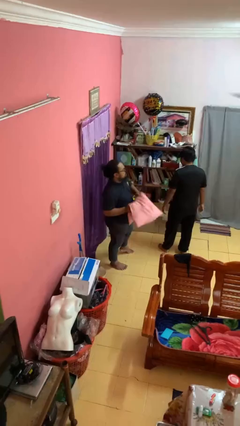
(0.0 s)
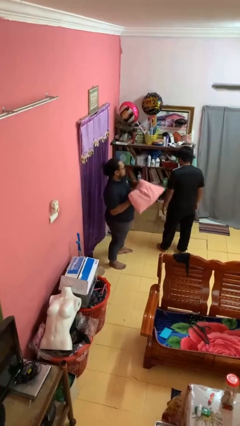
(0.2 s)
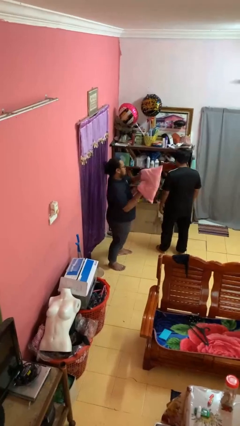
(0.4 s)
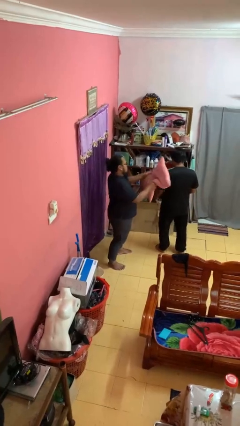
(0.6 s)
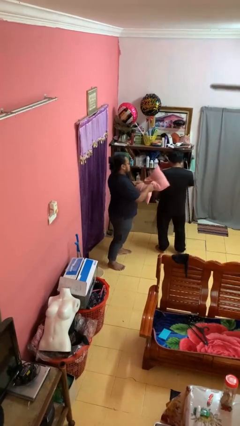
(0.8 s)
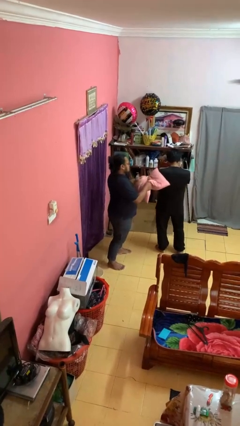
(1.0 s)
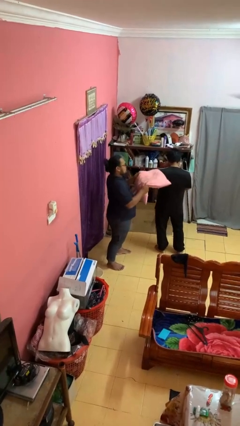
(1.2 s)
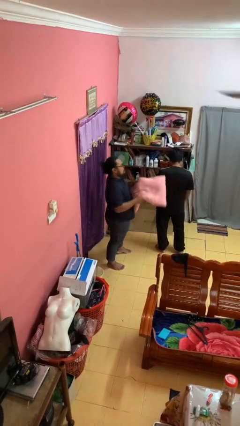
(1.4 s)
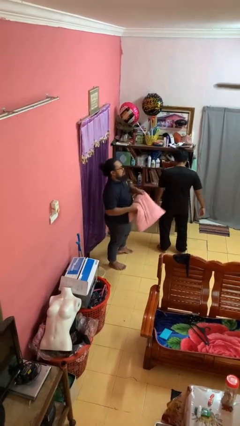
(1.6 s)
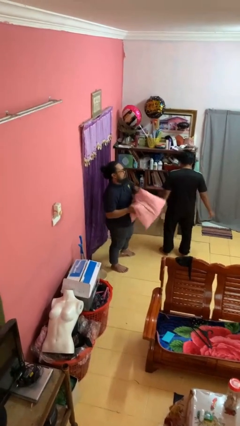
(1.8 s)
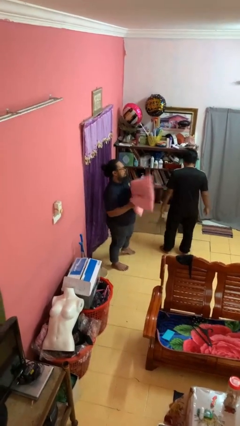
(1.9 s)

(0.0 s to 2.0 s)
person hits person with pillow

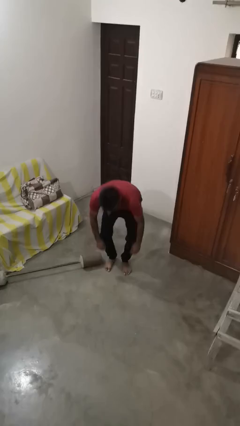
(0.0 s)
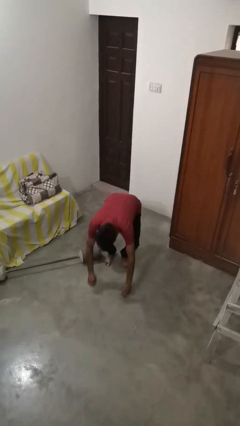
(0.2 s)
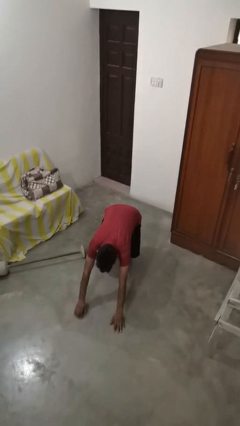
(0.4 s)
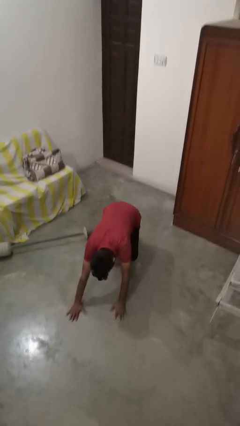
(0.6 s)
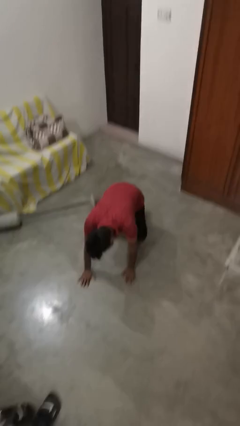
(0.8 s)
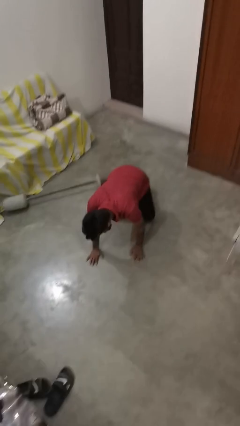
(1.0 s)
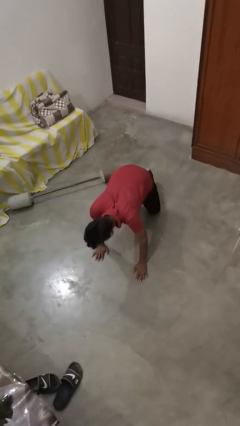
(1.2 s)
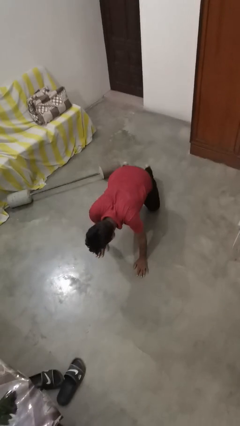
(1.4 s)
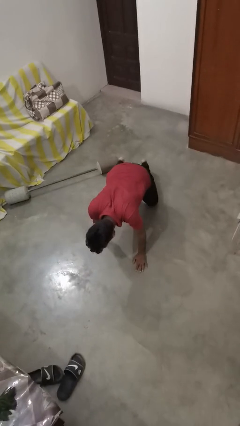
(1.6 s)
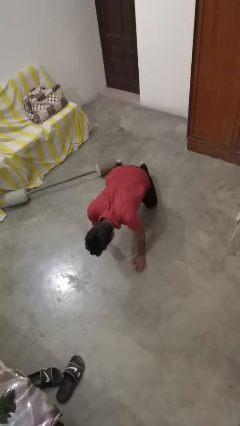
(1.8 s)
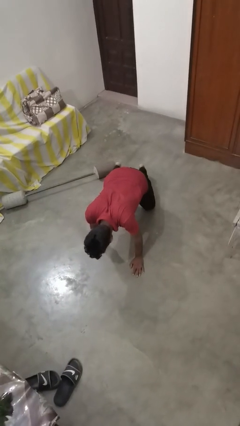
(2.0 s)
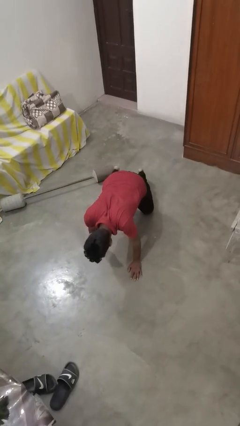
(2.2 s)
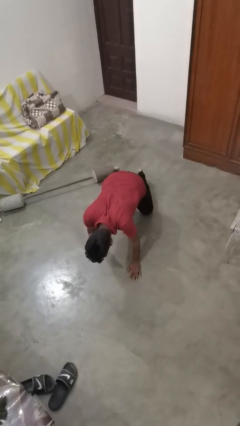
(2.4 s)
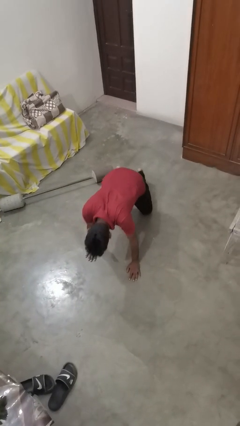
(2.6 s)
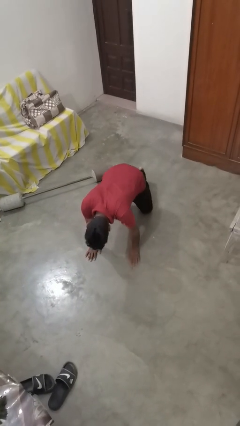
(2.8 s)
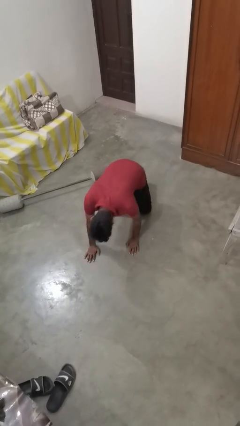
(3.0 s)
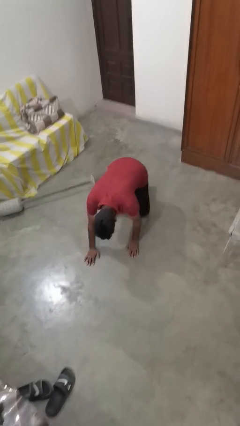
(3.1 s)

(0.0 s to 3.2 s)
person lies down on floor

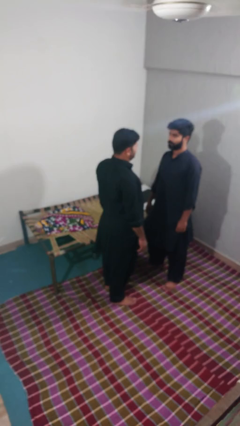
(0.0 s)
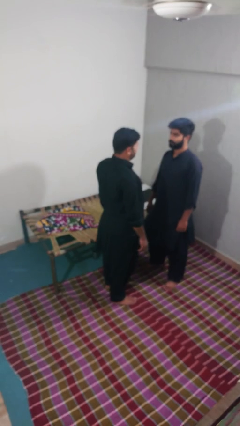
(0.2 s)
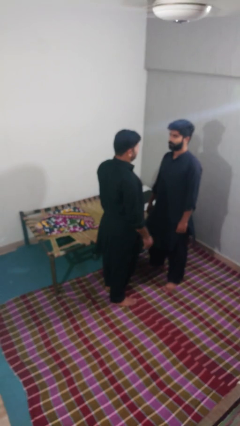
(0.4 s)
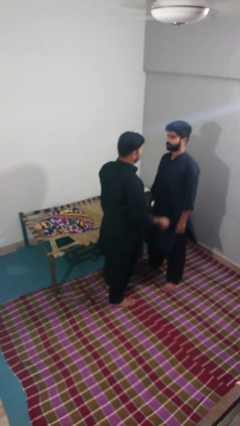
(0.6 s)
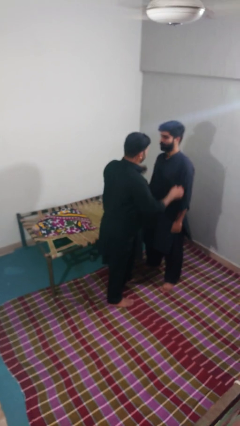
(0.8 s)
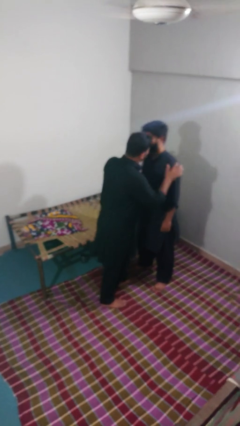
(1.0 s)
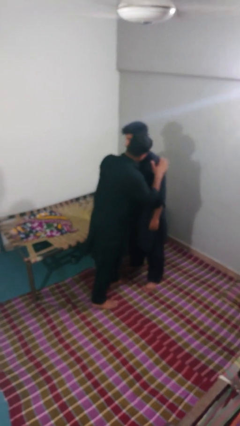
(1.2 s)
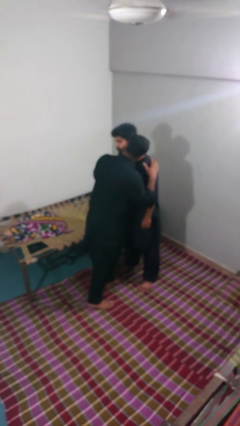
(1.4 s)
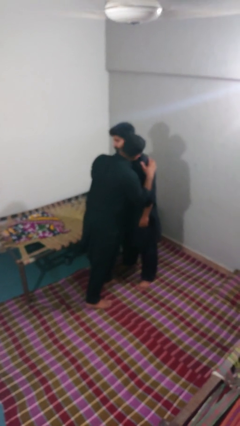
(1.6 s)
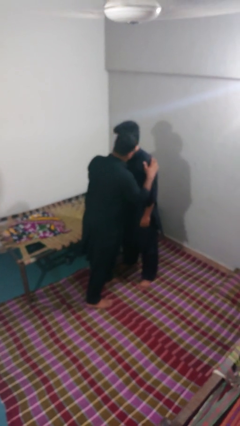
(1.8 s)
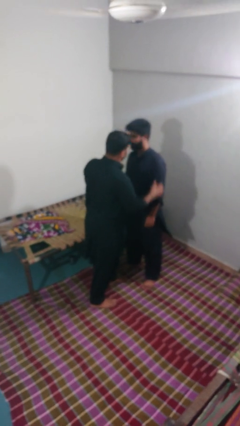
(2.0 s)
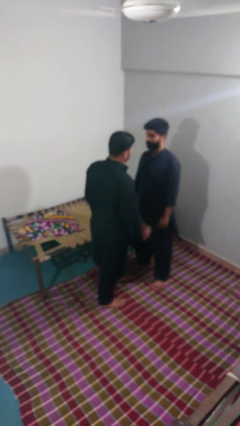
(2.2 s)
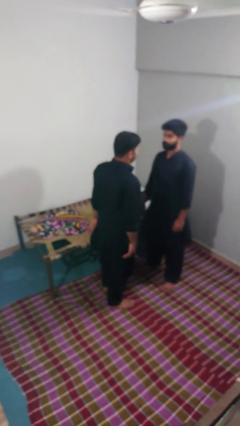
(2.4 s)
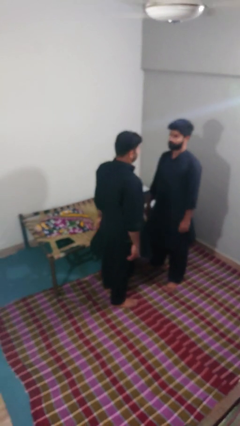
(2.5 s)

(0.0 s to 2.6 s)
person kisses cheek of person

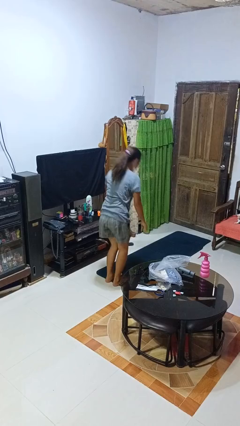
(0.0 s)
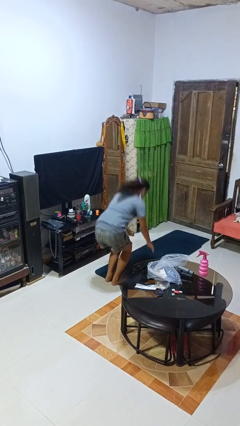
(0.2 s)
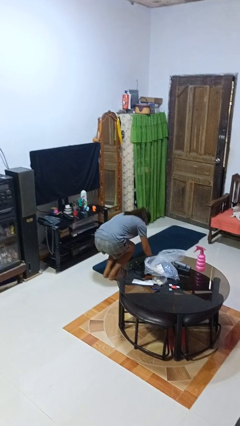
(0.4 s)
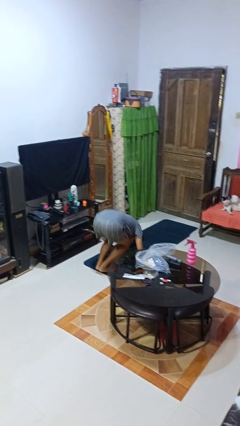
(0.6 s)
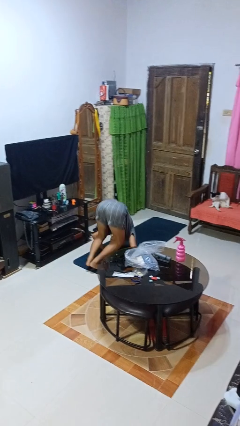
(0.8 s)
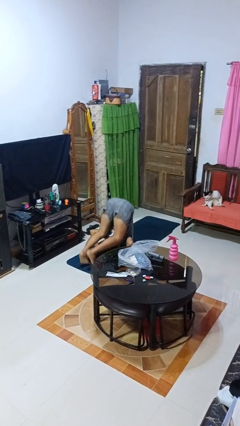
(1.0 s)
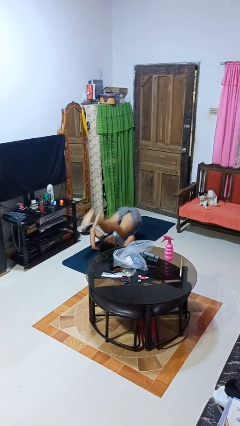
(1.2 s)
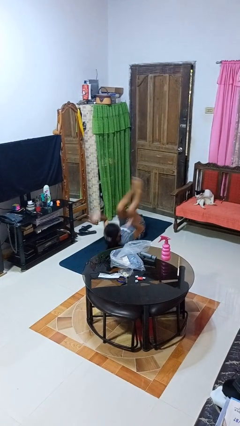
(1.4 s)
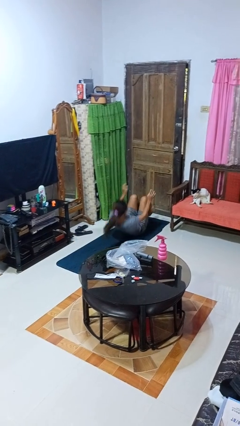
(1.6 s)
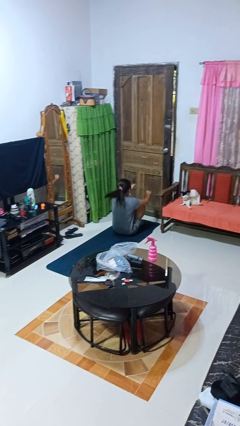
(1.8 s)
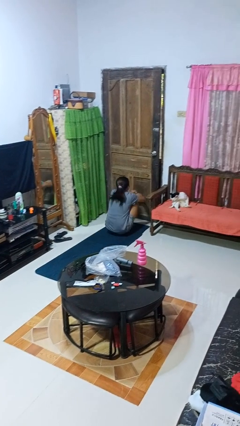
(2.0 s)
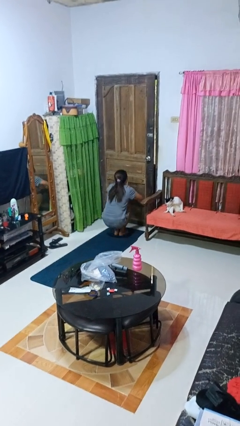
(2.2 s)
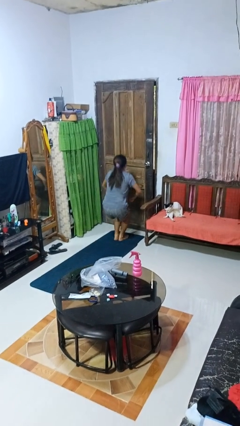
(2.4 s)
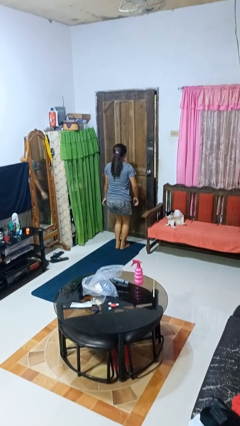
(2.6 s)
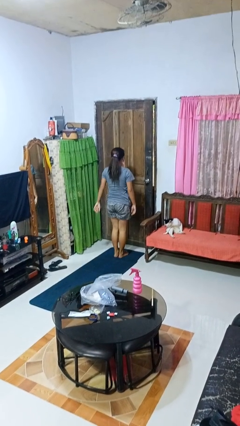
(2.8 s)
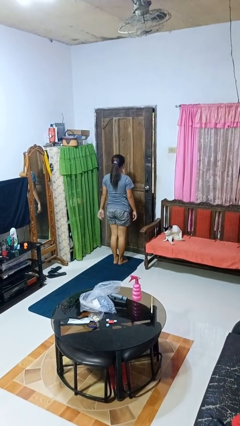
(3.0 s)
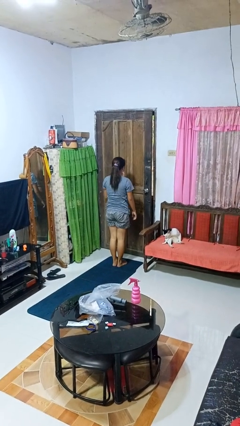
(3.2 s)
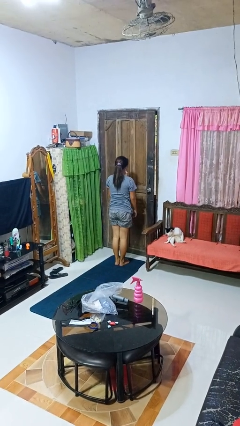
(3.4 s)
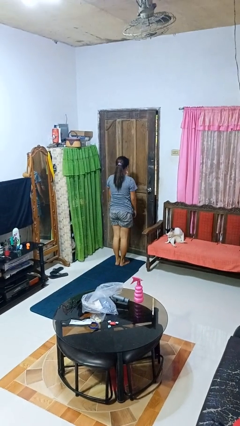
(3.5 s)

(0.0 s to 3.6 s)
person somersaults

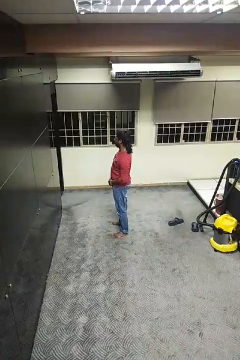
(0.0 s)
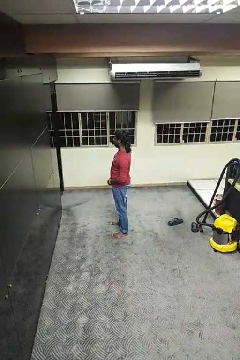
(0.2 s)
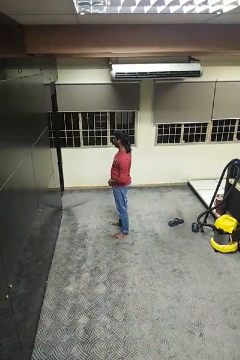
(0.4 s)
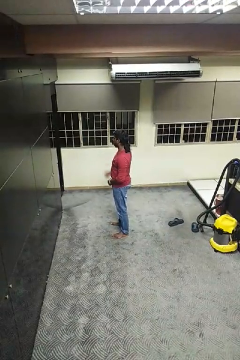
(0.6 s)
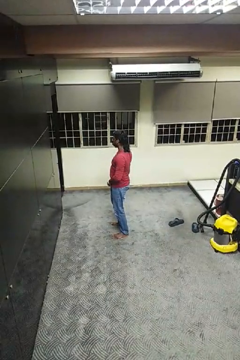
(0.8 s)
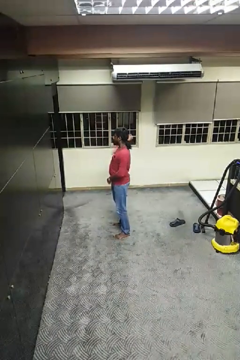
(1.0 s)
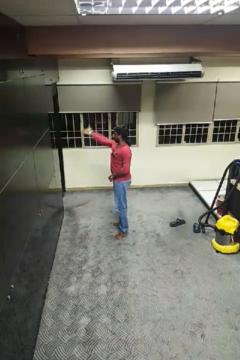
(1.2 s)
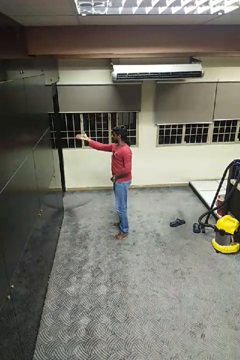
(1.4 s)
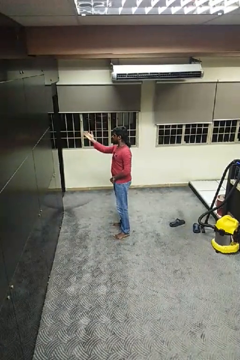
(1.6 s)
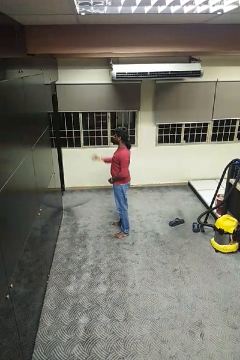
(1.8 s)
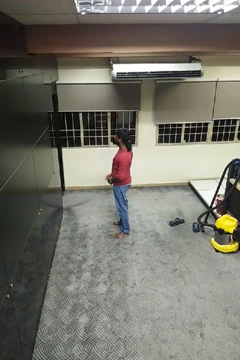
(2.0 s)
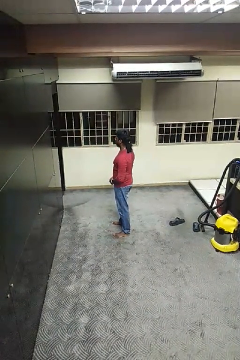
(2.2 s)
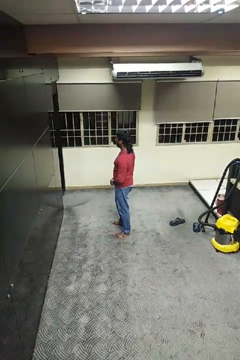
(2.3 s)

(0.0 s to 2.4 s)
person karate chop

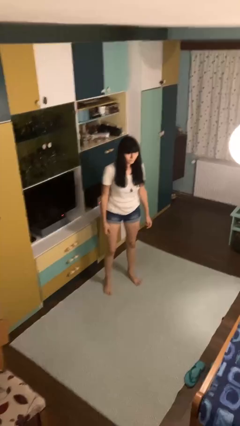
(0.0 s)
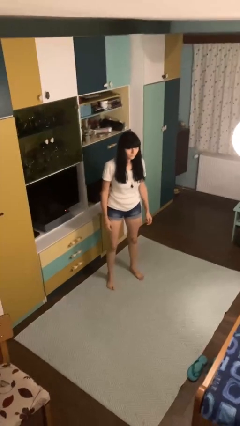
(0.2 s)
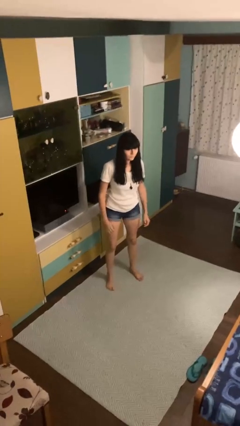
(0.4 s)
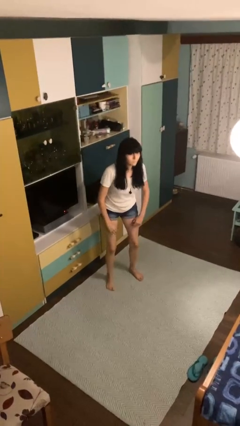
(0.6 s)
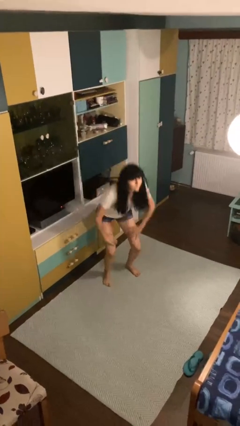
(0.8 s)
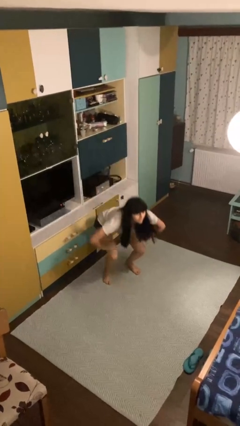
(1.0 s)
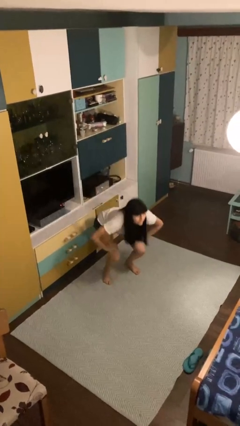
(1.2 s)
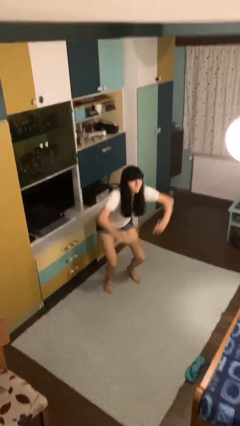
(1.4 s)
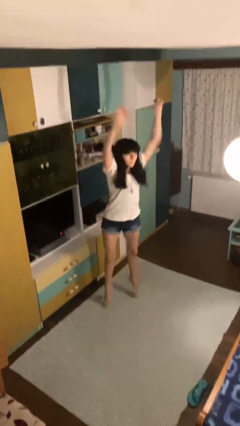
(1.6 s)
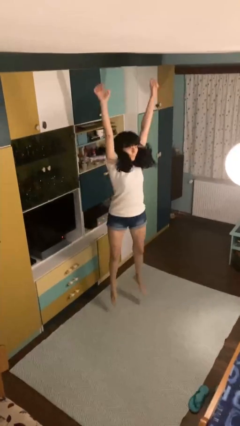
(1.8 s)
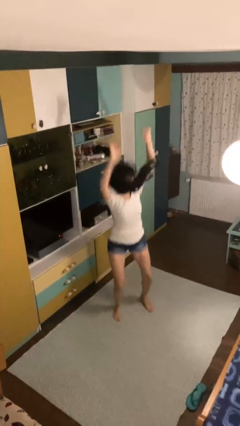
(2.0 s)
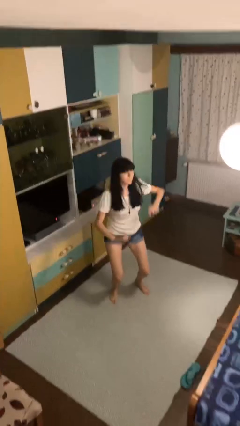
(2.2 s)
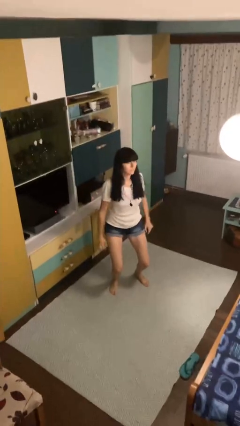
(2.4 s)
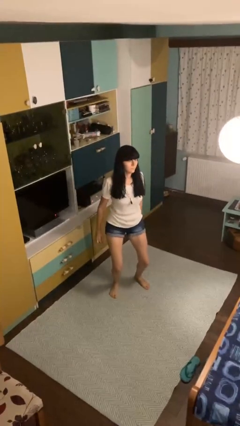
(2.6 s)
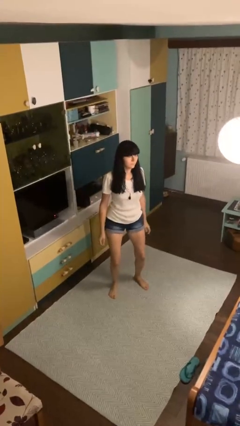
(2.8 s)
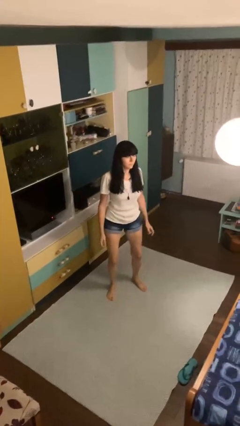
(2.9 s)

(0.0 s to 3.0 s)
person jumps

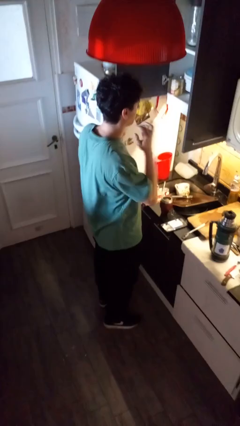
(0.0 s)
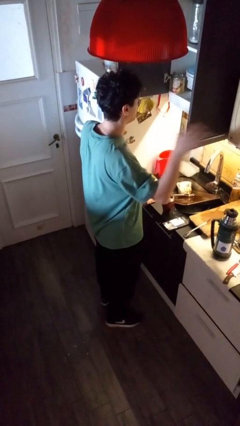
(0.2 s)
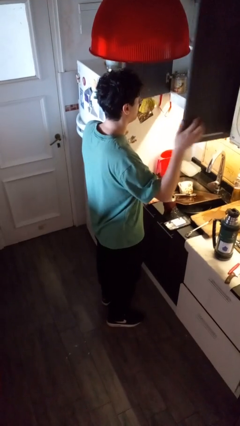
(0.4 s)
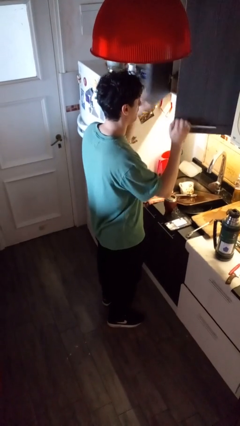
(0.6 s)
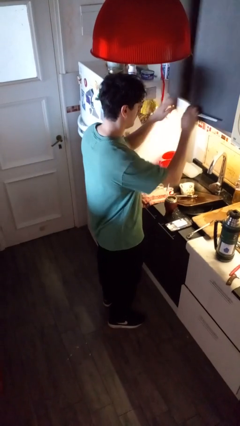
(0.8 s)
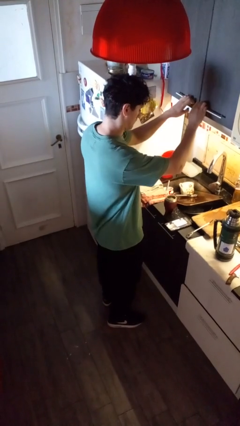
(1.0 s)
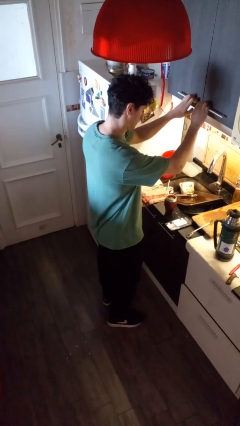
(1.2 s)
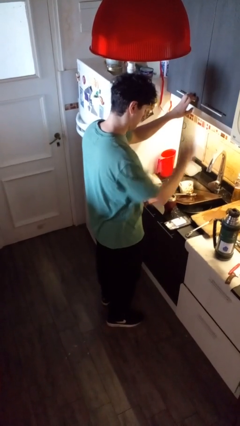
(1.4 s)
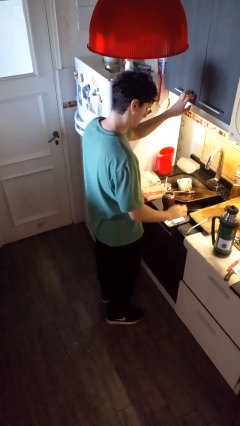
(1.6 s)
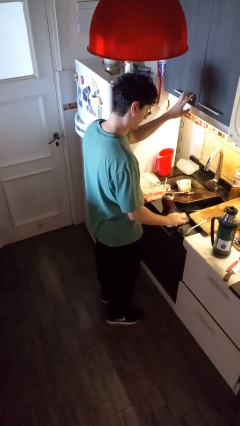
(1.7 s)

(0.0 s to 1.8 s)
person closes kitchen drawer
